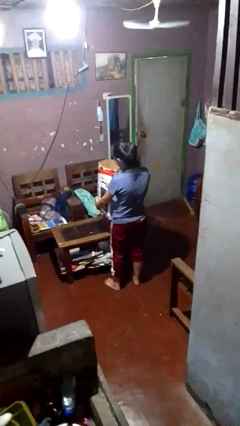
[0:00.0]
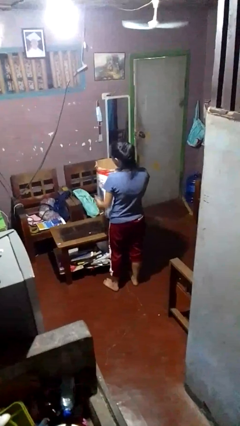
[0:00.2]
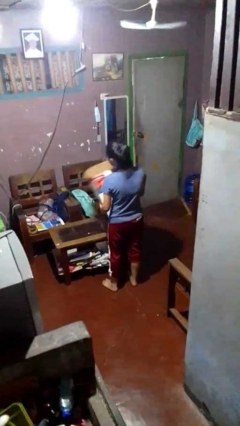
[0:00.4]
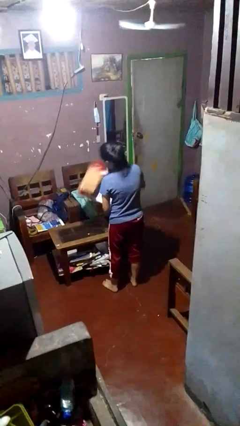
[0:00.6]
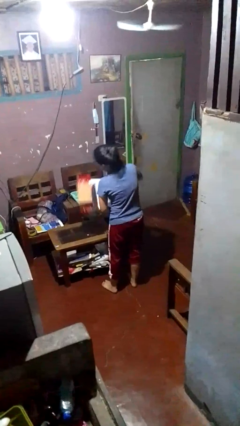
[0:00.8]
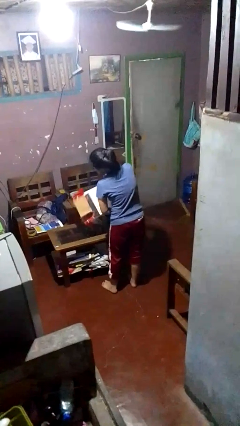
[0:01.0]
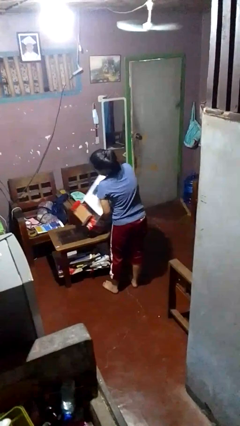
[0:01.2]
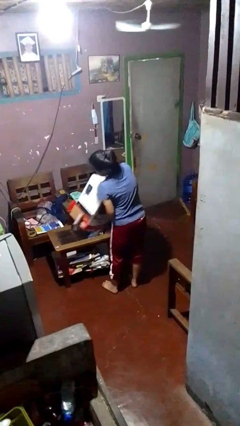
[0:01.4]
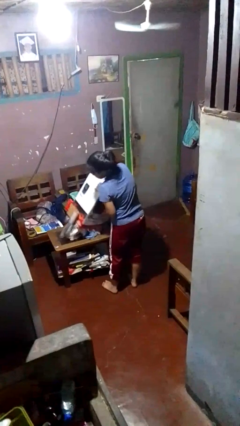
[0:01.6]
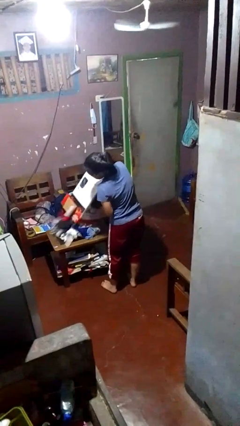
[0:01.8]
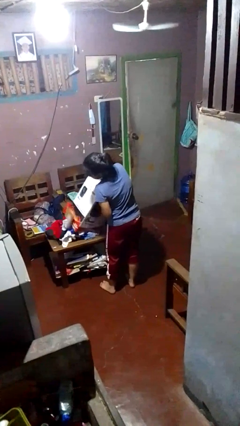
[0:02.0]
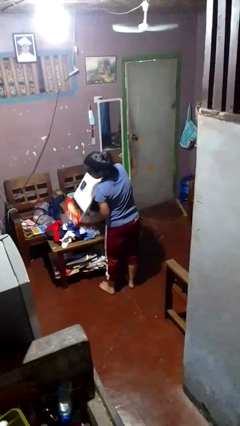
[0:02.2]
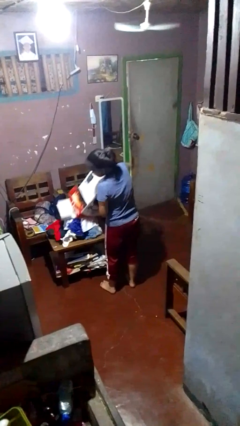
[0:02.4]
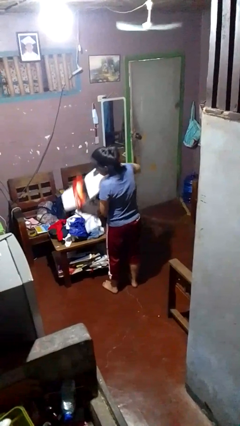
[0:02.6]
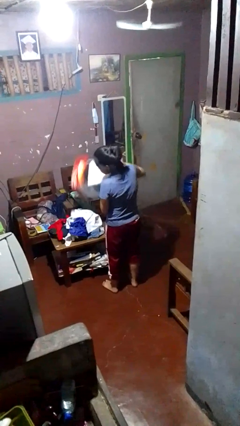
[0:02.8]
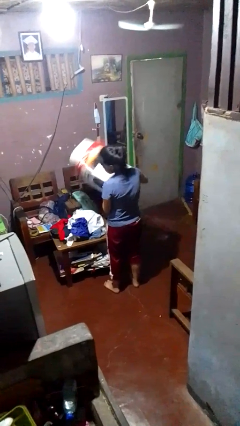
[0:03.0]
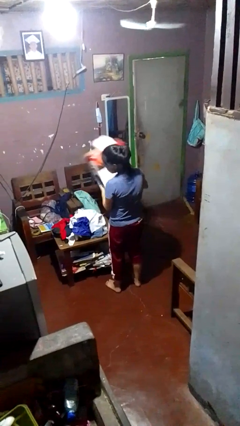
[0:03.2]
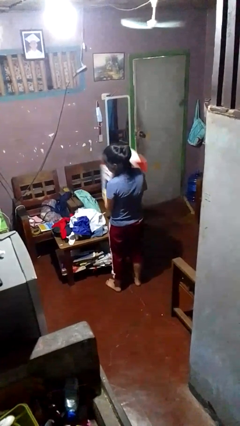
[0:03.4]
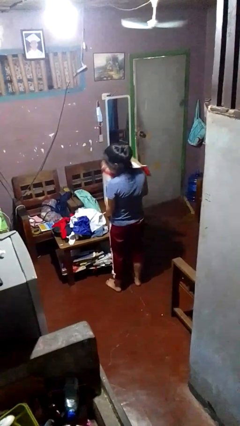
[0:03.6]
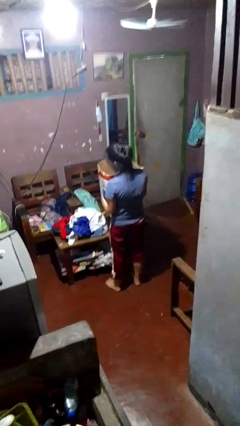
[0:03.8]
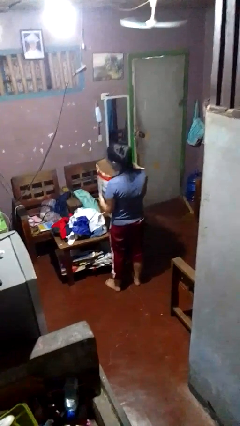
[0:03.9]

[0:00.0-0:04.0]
person unloads box onto table

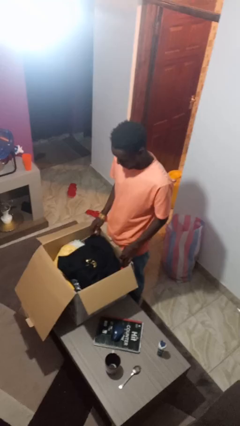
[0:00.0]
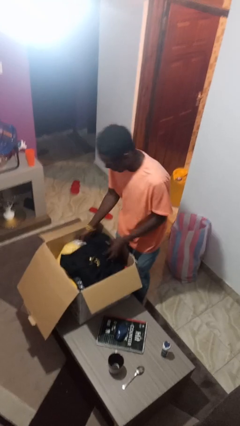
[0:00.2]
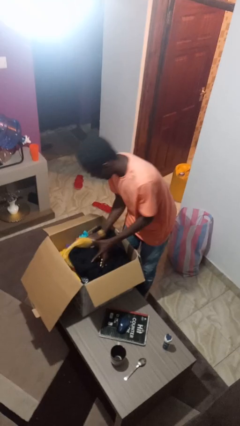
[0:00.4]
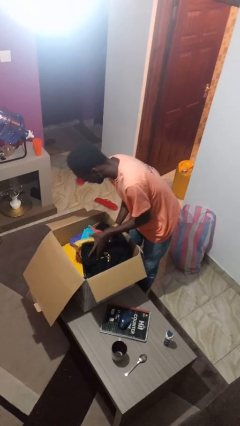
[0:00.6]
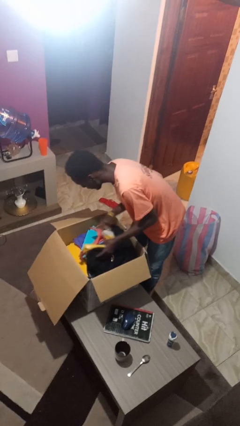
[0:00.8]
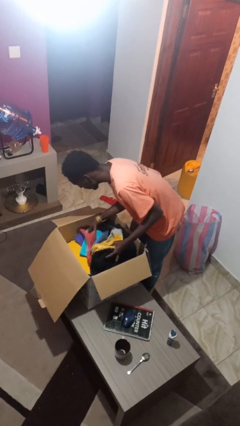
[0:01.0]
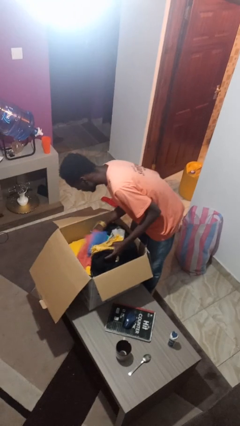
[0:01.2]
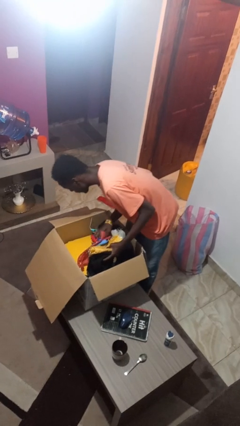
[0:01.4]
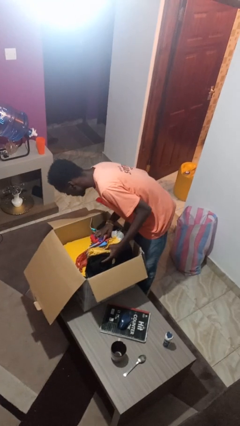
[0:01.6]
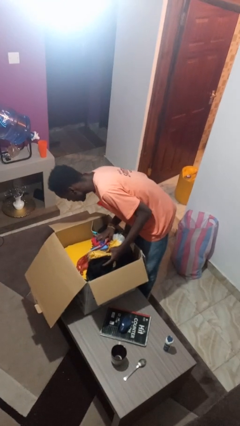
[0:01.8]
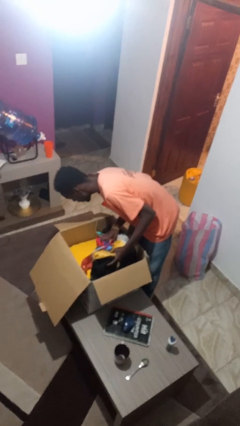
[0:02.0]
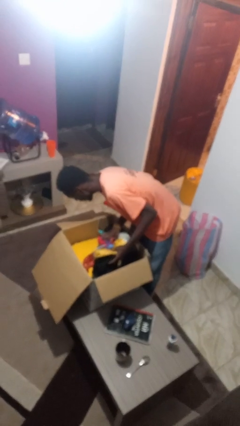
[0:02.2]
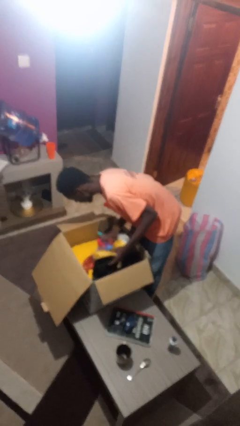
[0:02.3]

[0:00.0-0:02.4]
person searches in box

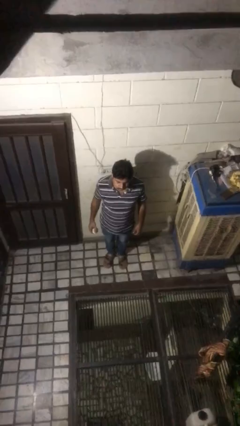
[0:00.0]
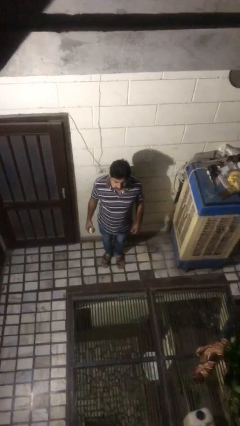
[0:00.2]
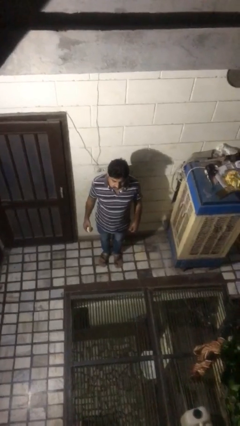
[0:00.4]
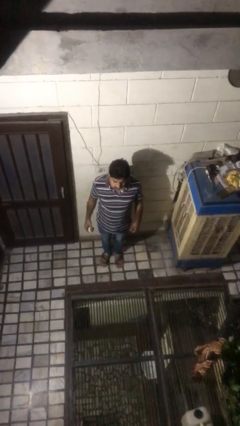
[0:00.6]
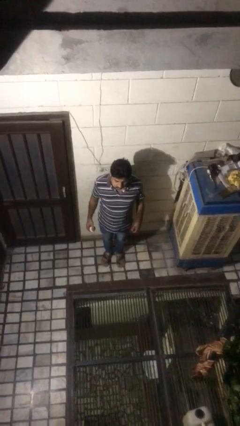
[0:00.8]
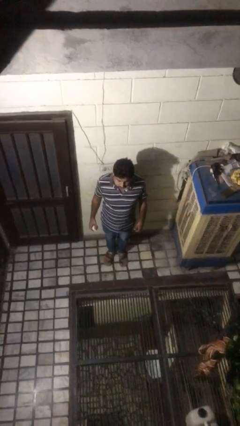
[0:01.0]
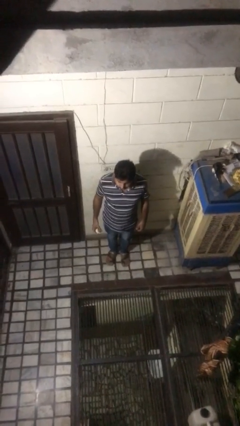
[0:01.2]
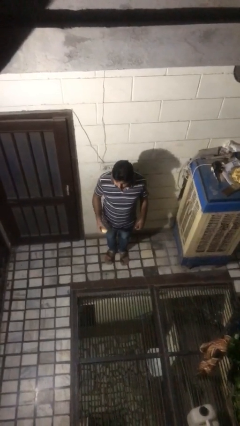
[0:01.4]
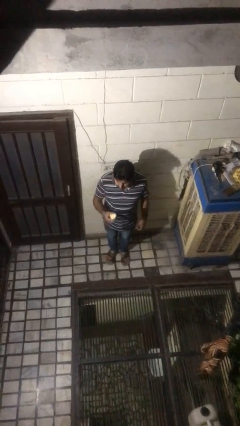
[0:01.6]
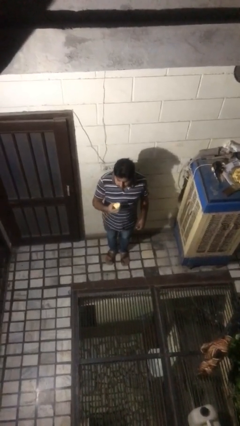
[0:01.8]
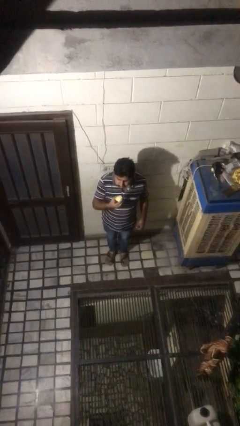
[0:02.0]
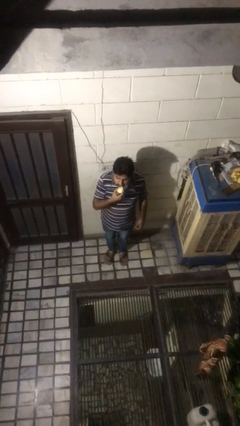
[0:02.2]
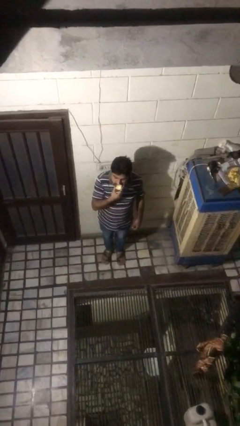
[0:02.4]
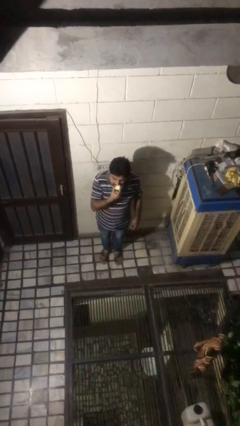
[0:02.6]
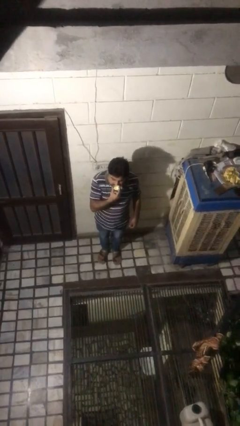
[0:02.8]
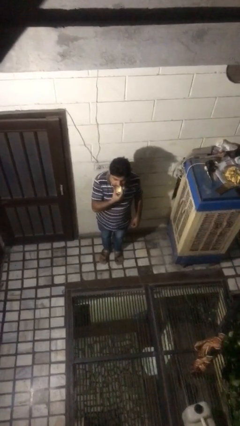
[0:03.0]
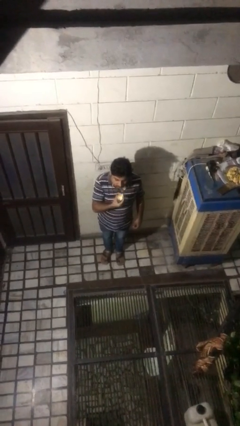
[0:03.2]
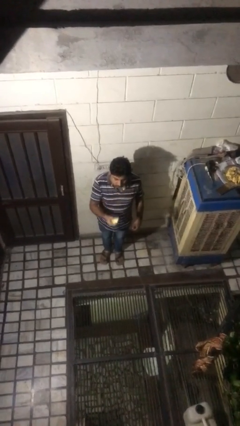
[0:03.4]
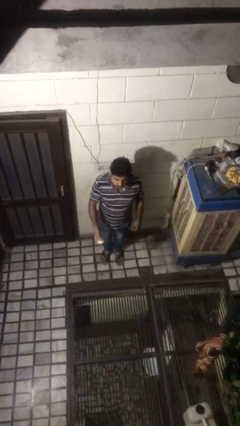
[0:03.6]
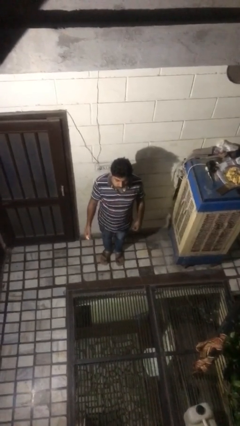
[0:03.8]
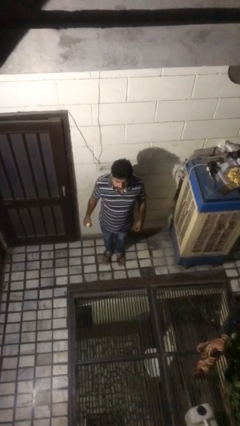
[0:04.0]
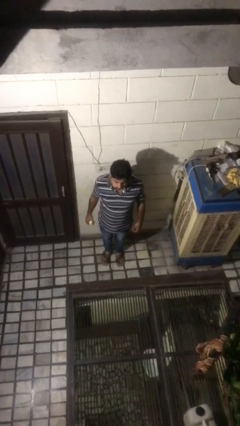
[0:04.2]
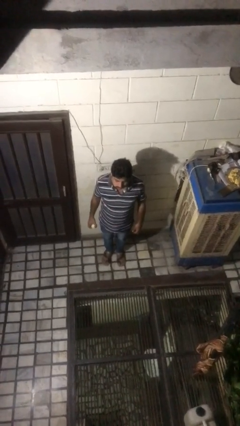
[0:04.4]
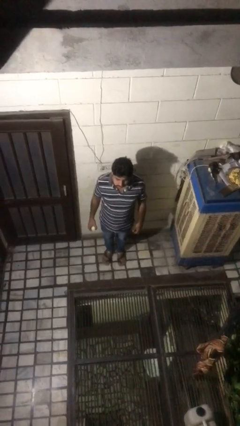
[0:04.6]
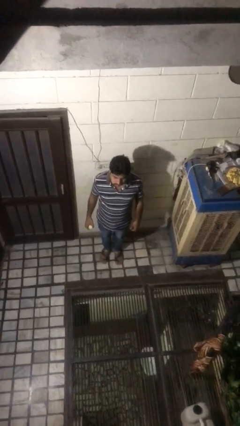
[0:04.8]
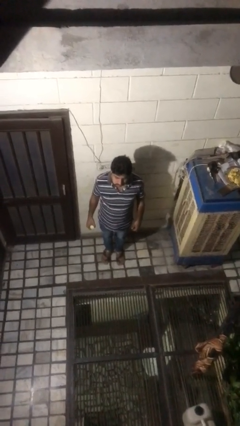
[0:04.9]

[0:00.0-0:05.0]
person eats apple

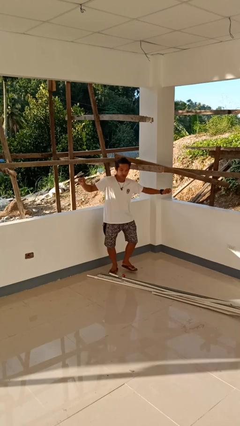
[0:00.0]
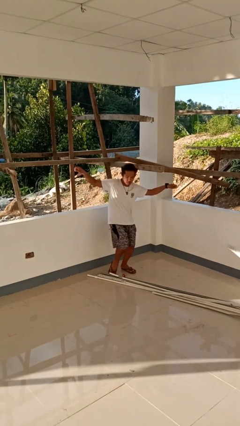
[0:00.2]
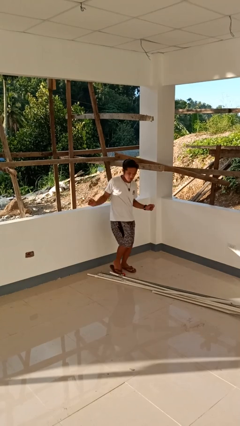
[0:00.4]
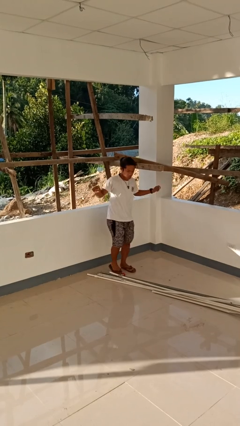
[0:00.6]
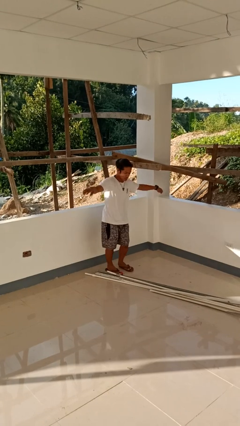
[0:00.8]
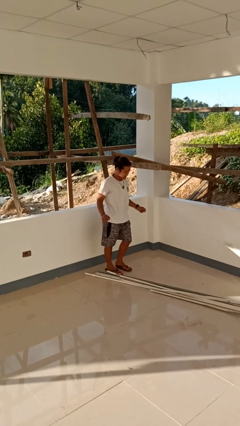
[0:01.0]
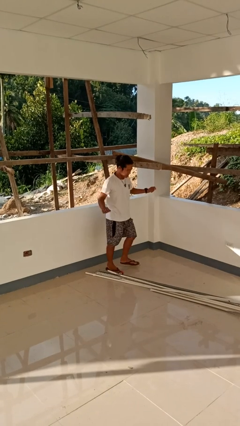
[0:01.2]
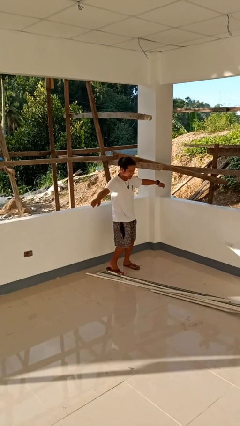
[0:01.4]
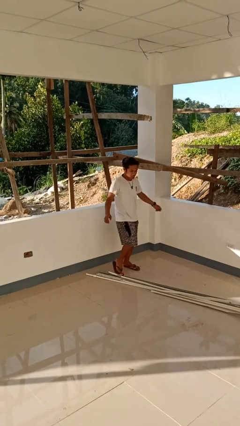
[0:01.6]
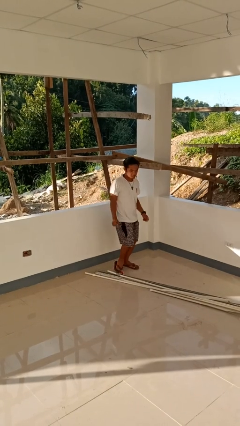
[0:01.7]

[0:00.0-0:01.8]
person dances in place

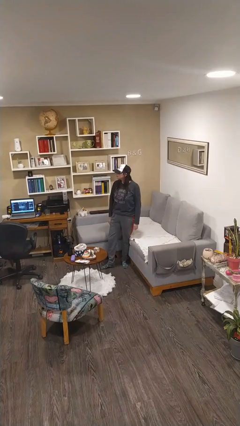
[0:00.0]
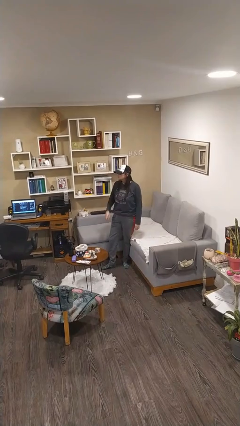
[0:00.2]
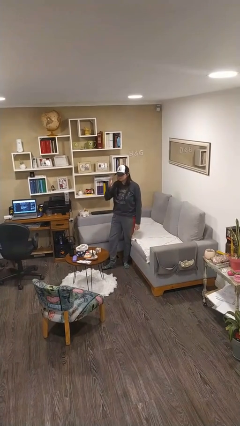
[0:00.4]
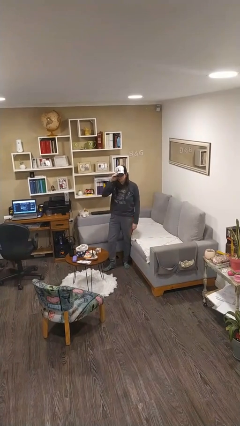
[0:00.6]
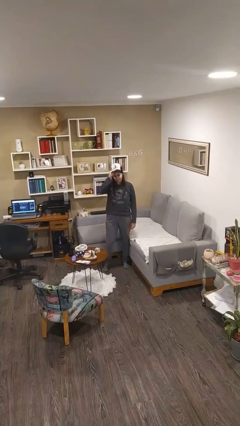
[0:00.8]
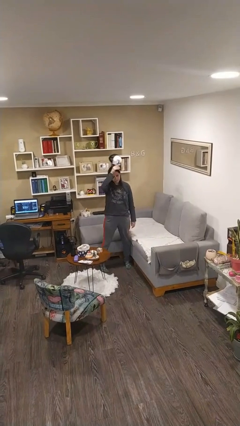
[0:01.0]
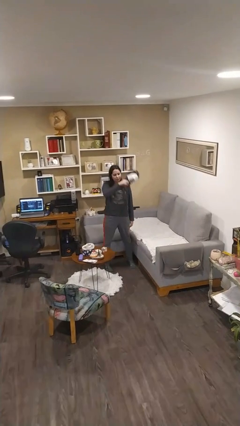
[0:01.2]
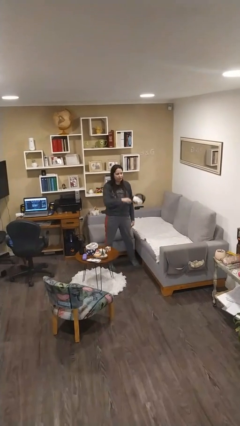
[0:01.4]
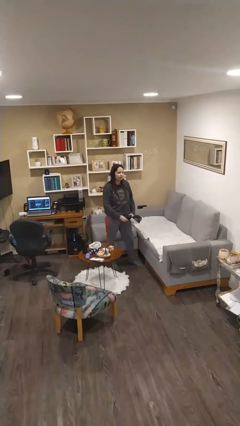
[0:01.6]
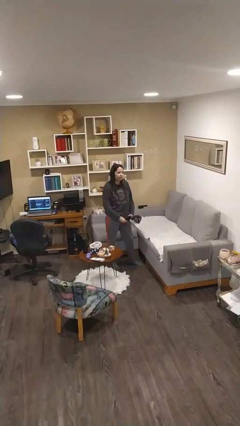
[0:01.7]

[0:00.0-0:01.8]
person takes off hat

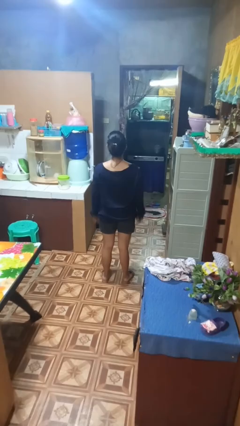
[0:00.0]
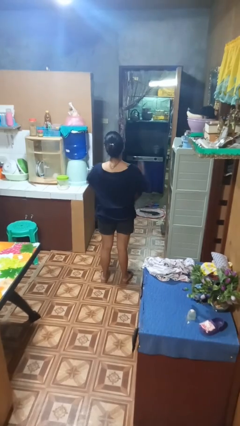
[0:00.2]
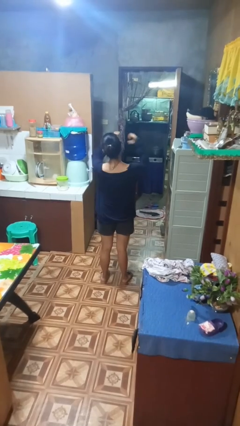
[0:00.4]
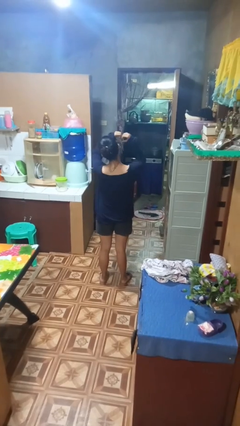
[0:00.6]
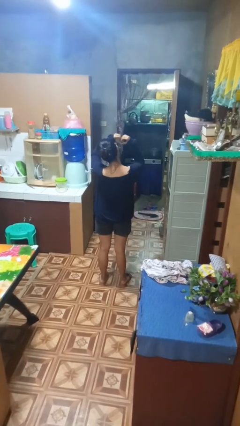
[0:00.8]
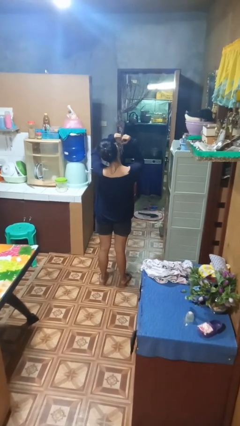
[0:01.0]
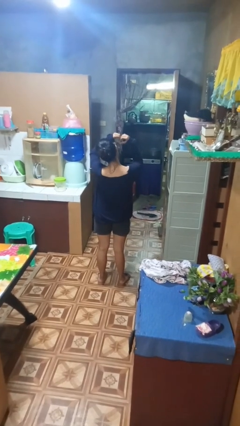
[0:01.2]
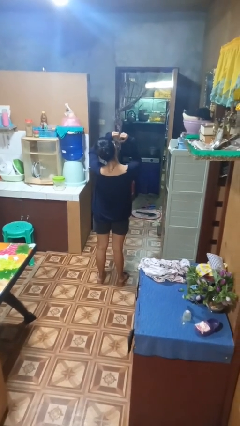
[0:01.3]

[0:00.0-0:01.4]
person gestures heart

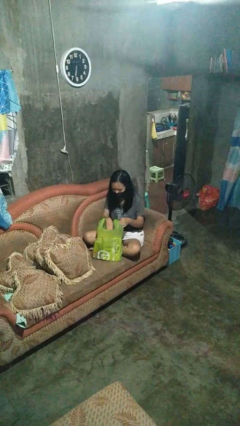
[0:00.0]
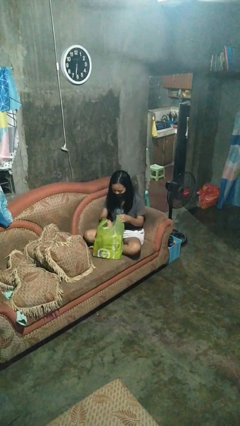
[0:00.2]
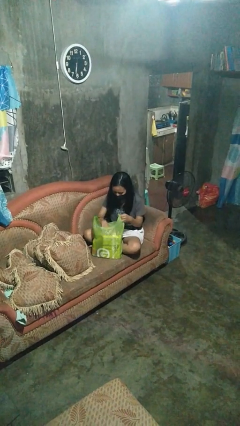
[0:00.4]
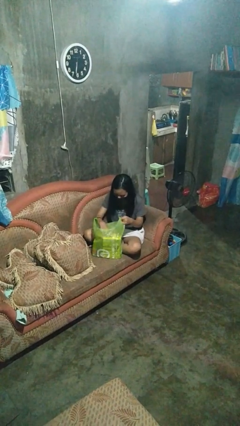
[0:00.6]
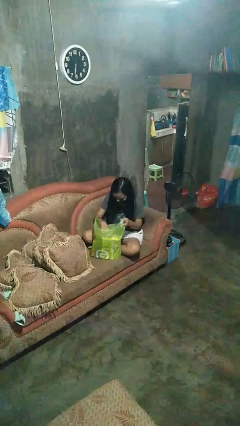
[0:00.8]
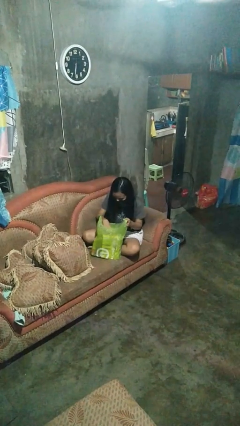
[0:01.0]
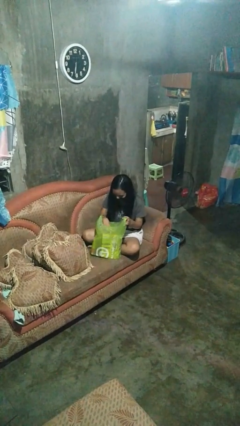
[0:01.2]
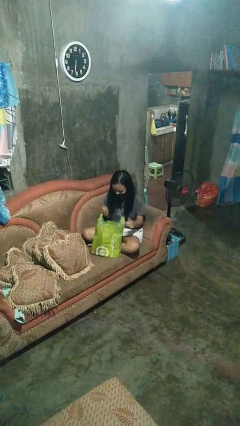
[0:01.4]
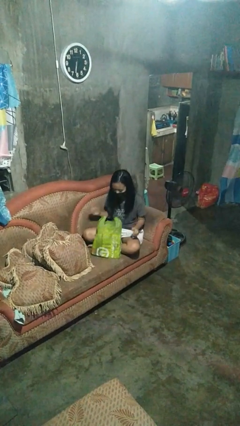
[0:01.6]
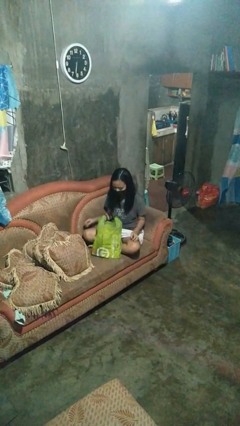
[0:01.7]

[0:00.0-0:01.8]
person searches in bag
